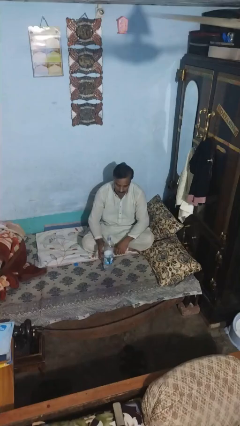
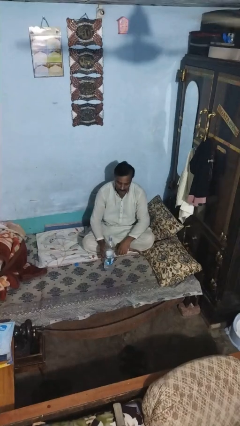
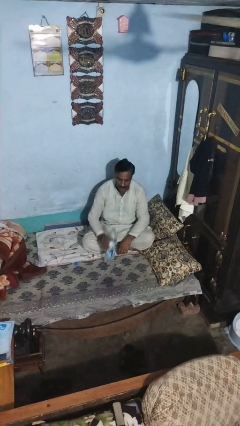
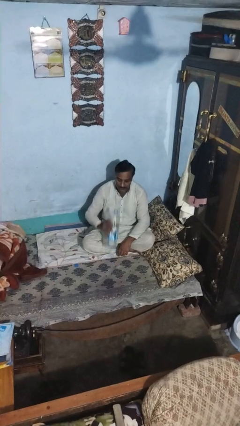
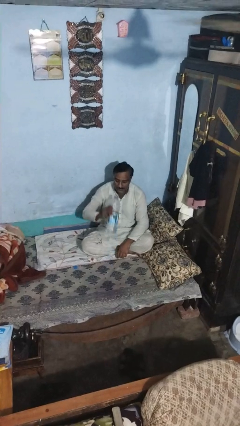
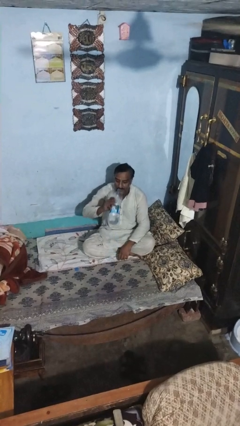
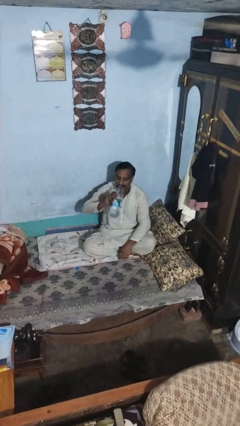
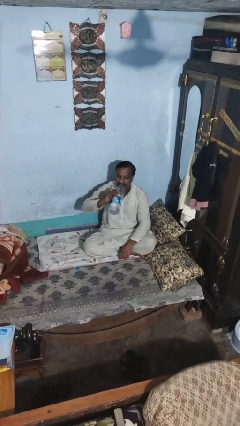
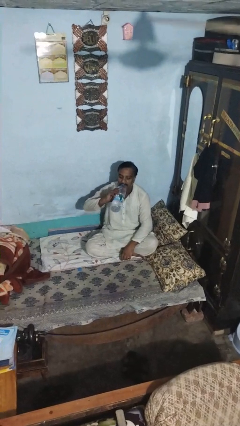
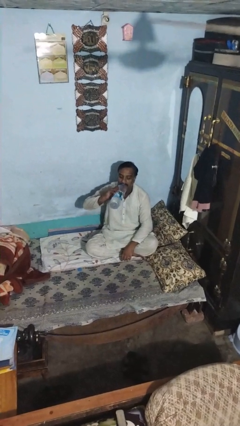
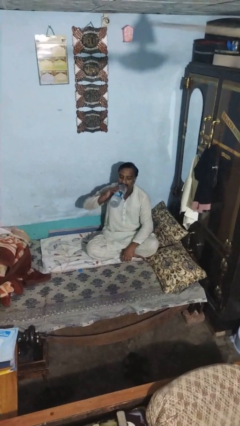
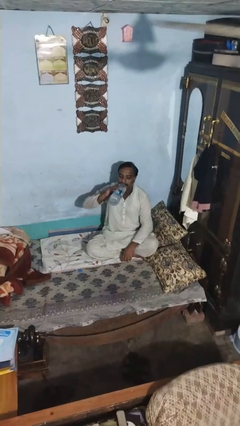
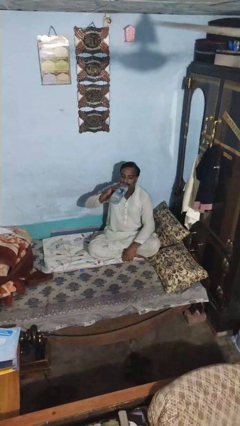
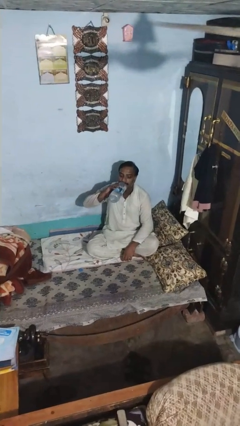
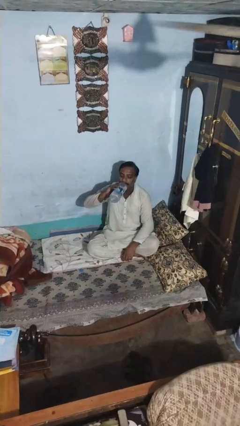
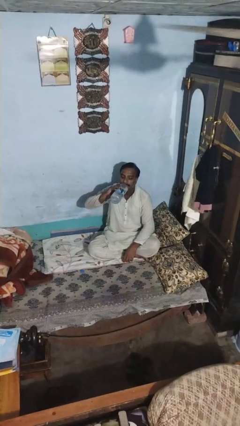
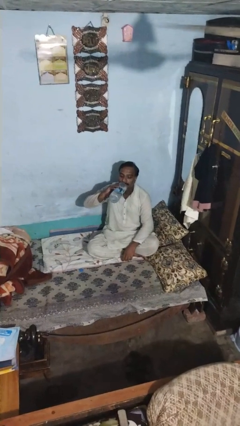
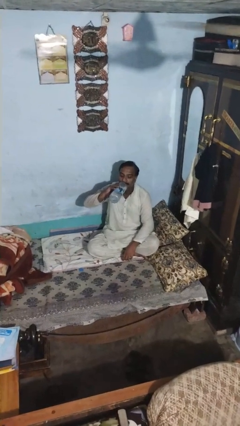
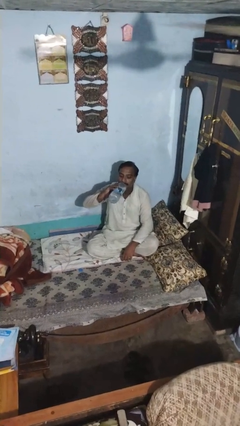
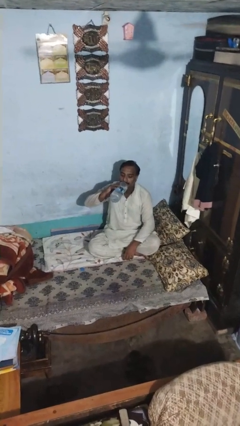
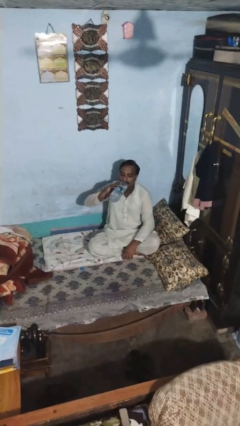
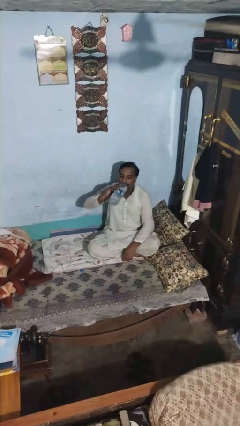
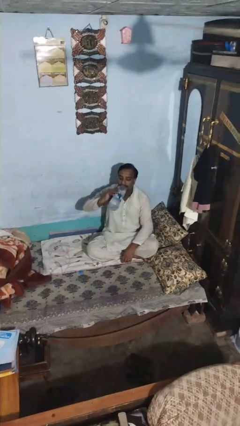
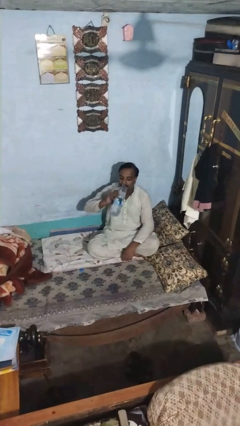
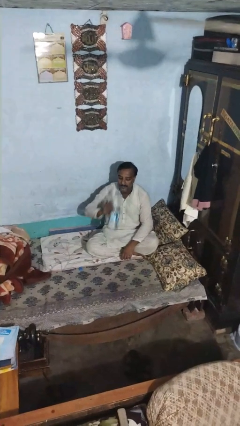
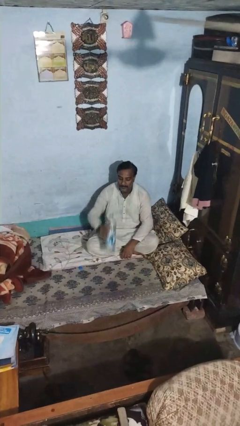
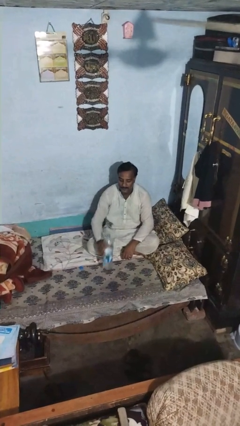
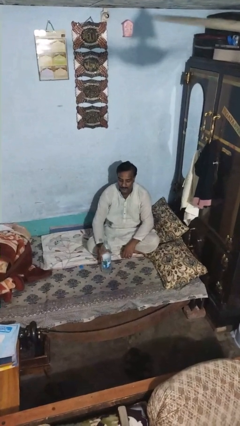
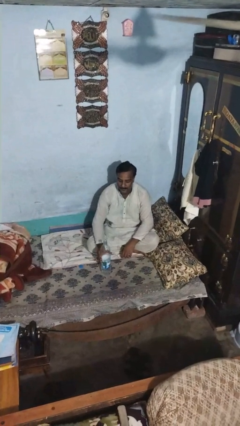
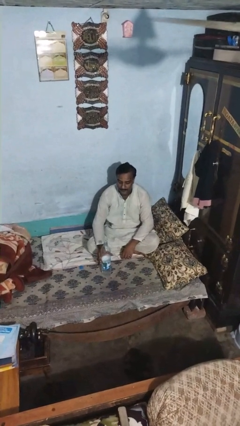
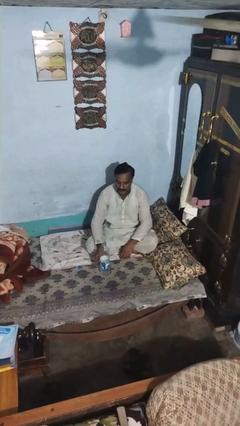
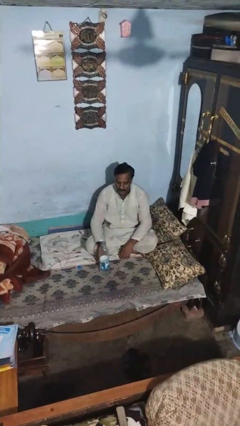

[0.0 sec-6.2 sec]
person drinks from bottle

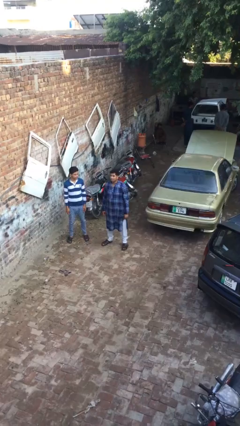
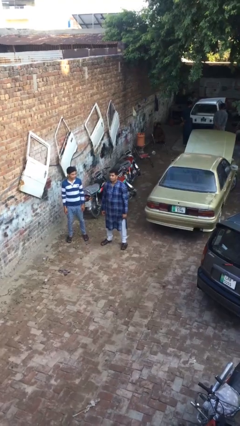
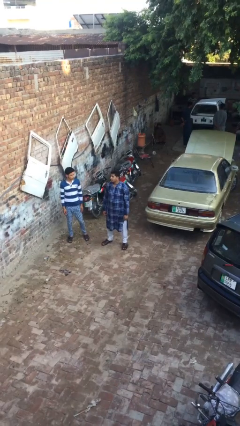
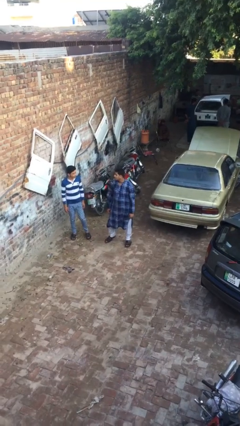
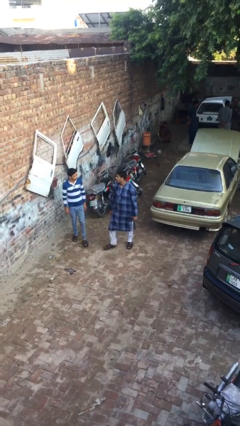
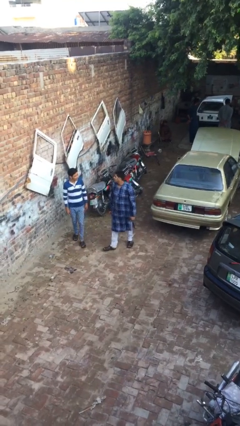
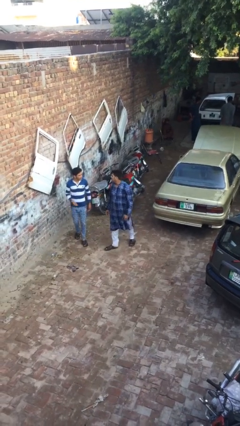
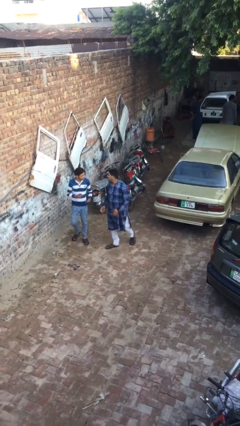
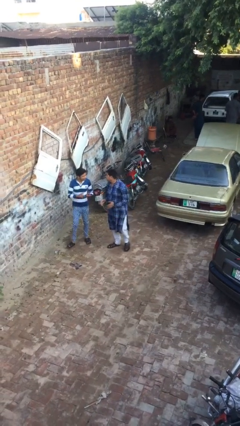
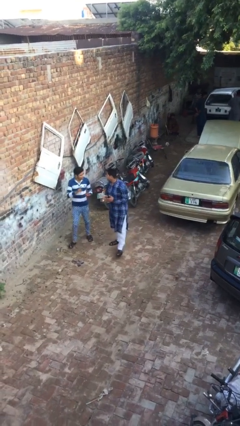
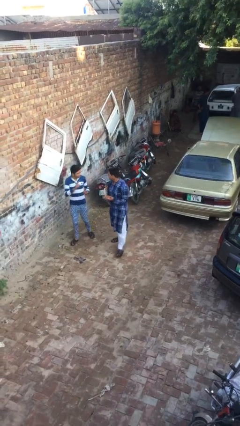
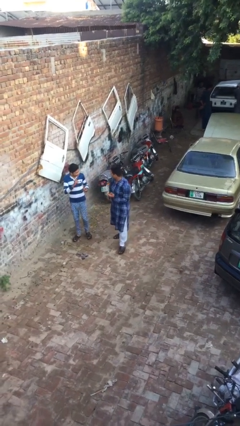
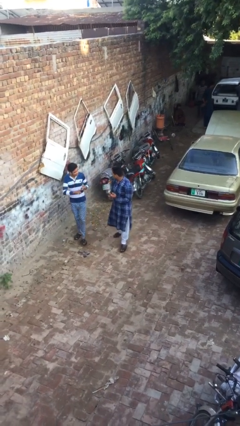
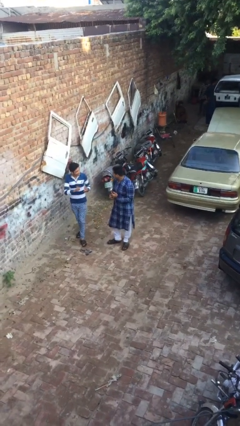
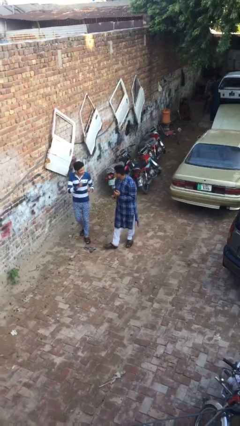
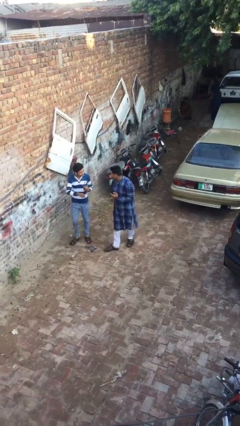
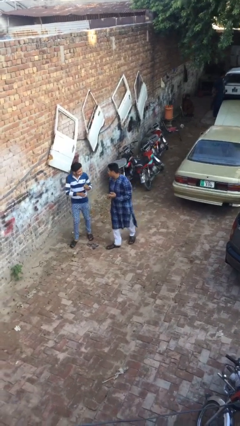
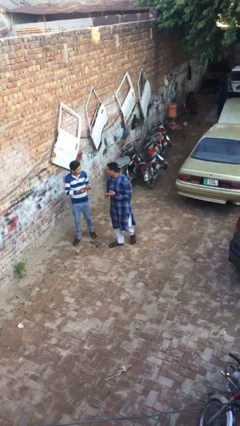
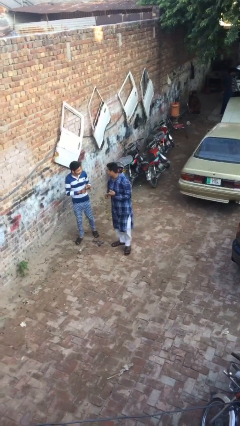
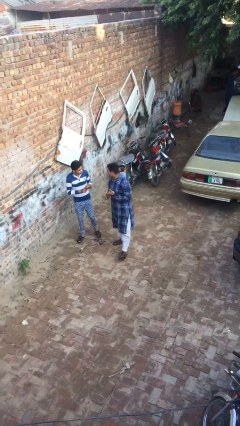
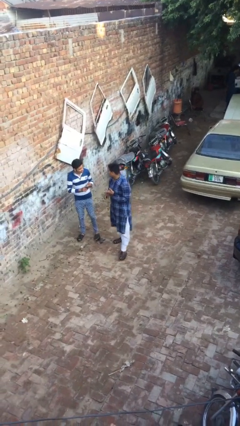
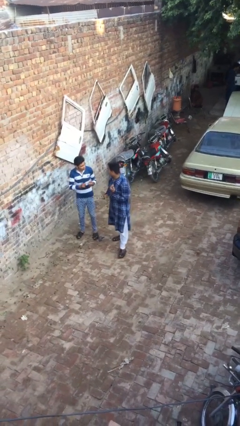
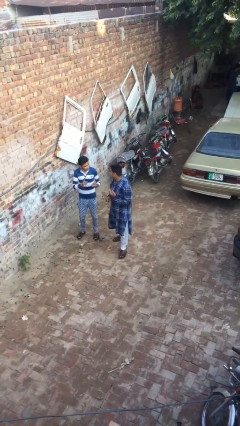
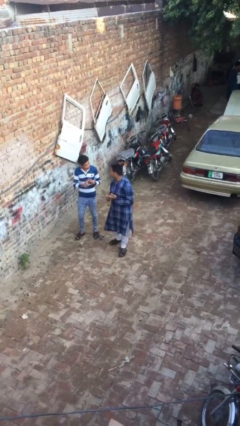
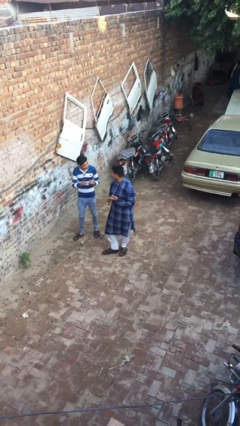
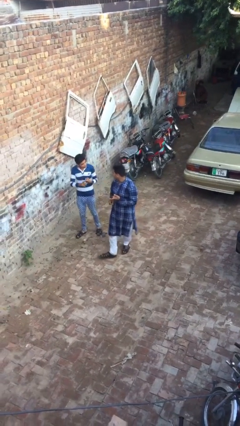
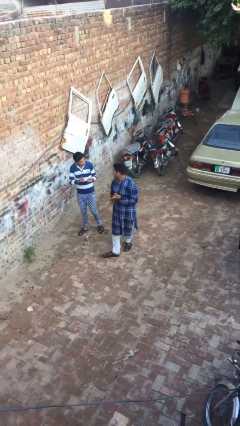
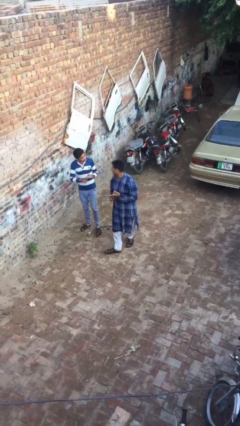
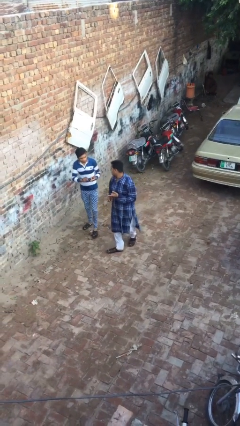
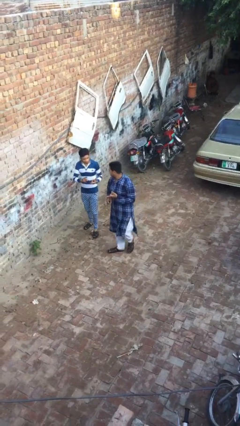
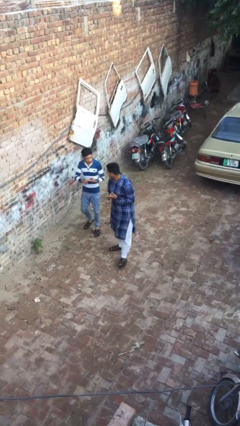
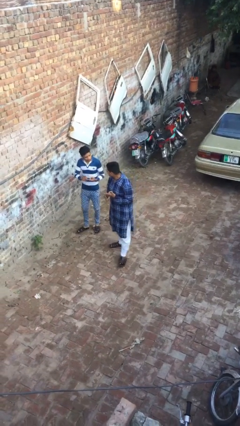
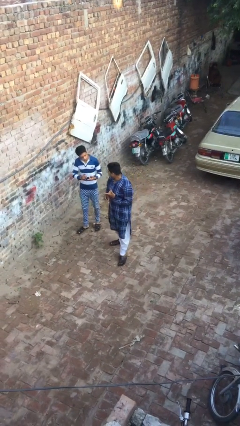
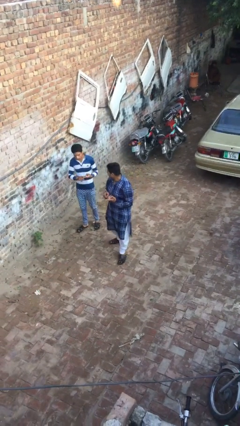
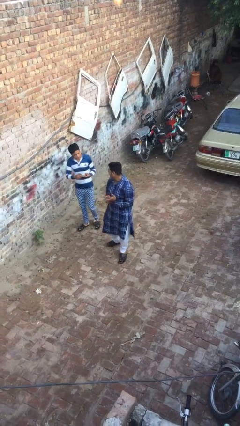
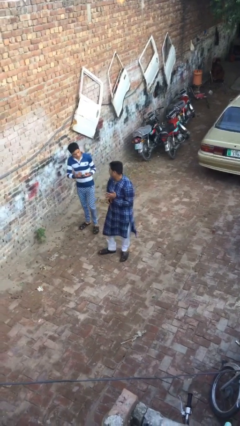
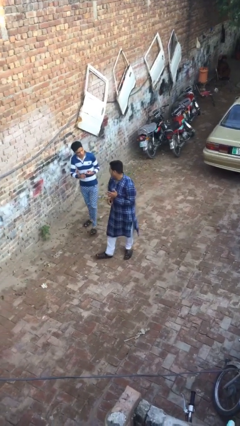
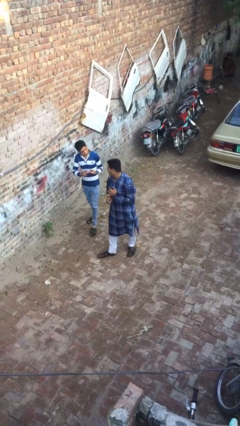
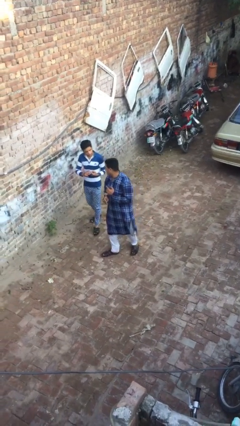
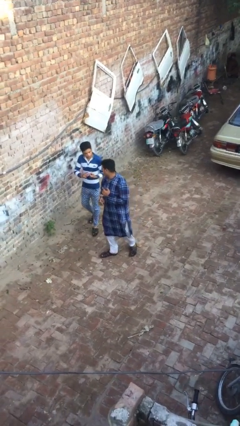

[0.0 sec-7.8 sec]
person talks to person

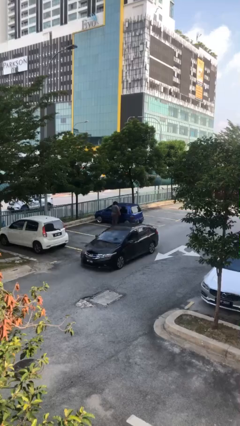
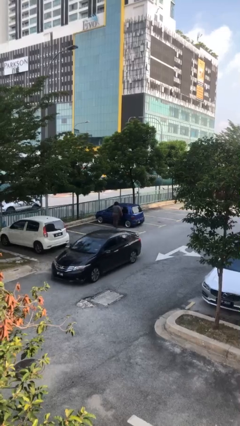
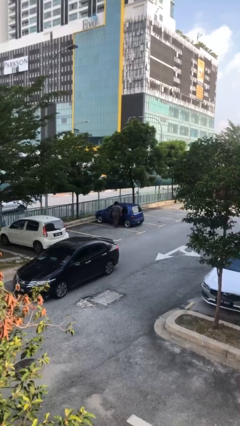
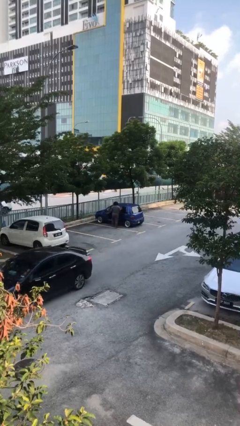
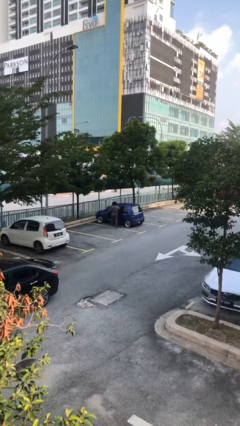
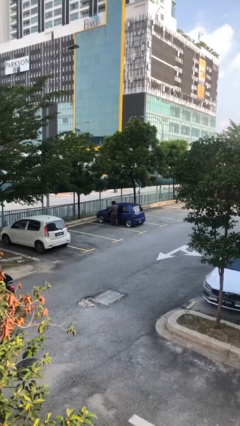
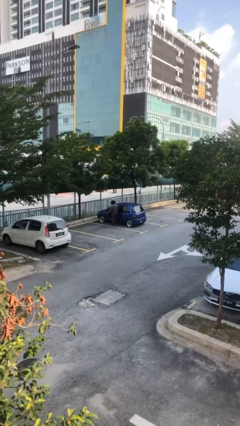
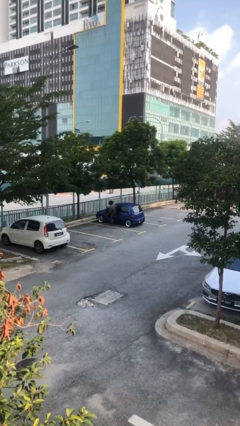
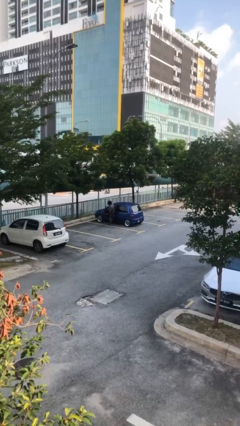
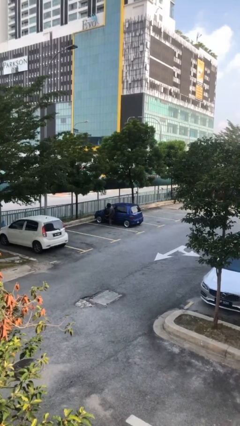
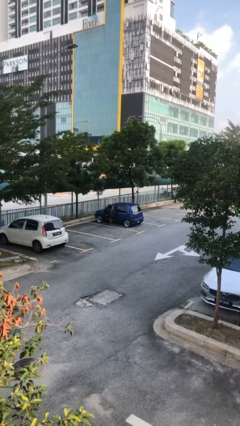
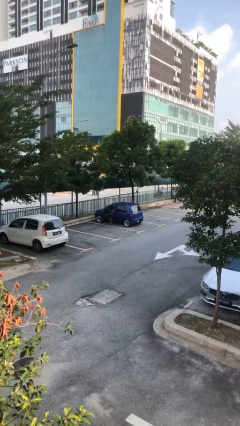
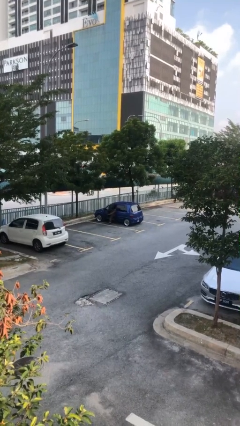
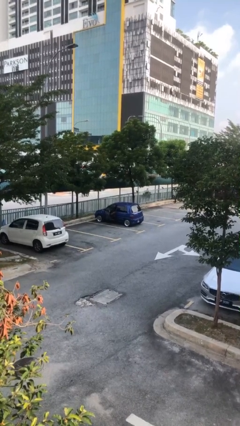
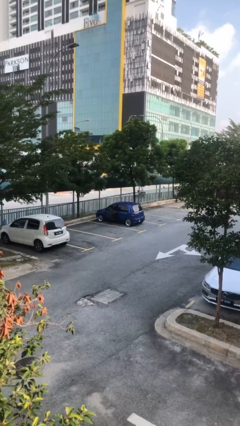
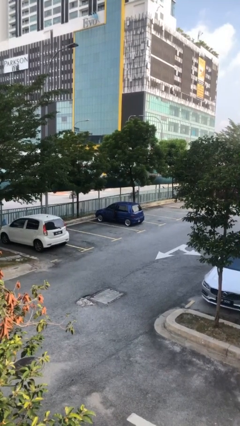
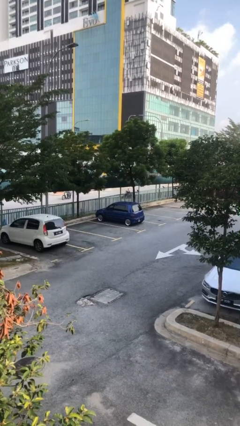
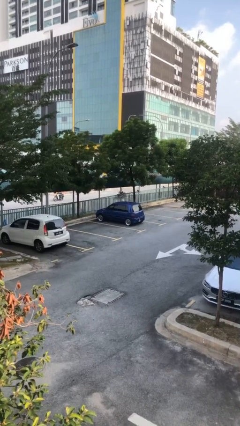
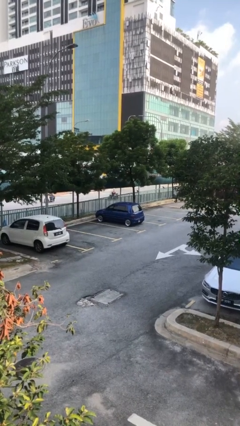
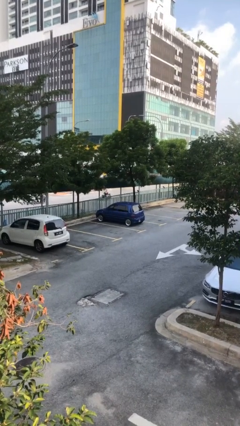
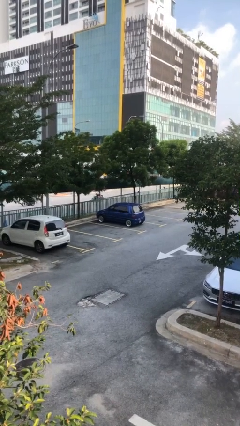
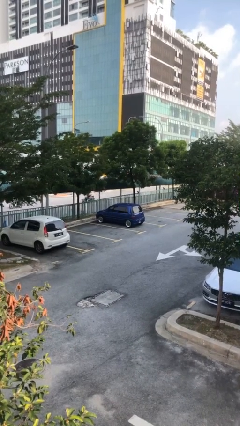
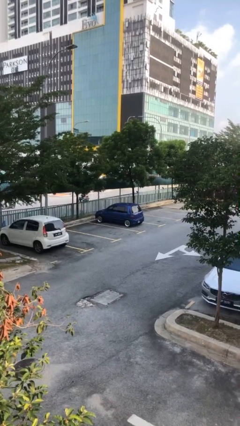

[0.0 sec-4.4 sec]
car picks up person
